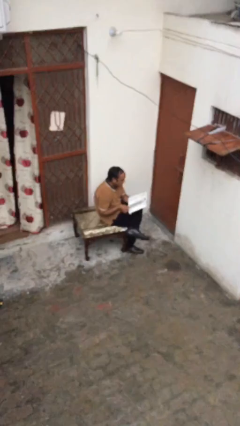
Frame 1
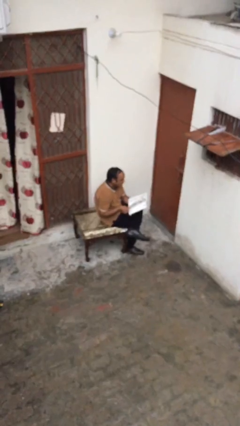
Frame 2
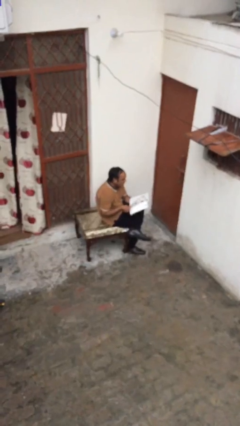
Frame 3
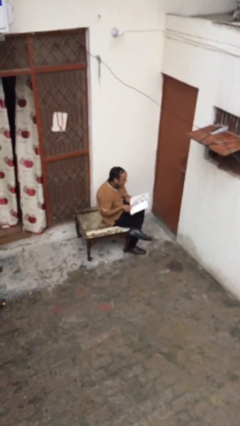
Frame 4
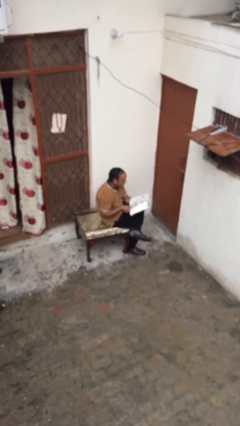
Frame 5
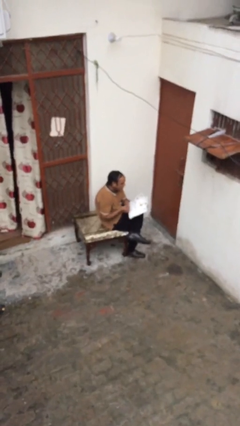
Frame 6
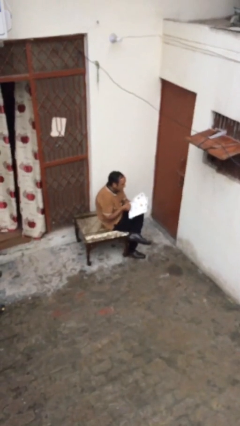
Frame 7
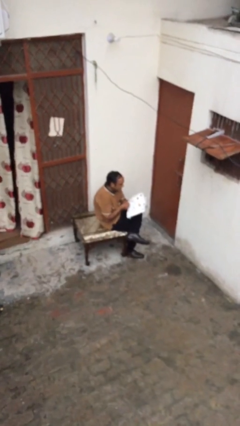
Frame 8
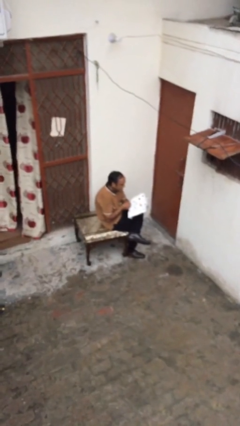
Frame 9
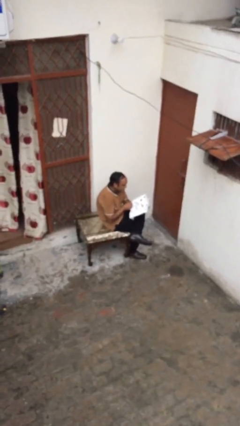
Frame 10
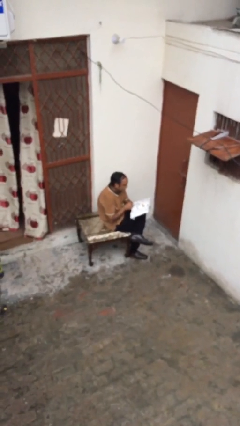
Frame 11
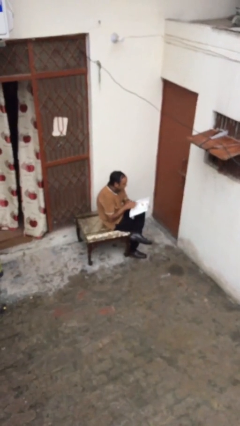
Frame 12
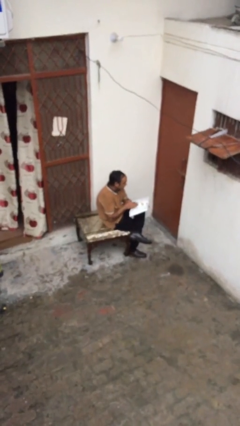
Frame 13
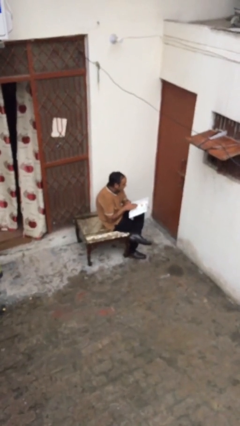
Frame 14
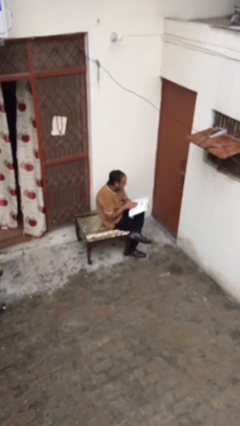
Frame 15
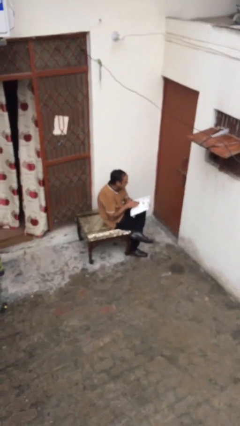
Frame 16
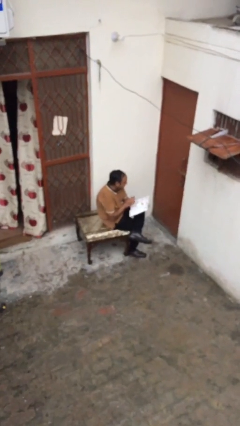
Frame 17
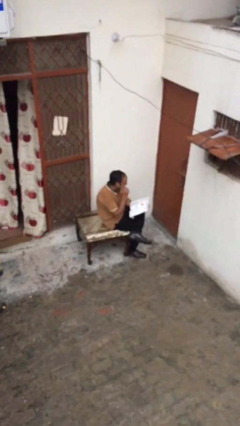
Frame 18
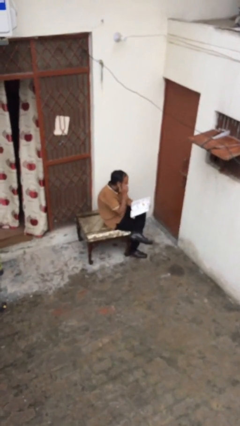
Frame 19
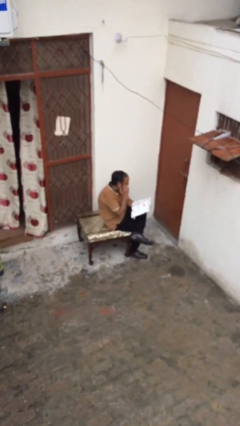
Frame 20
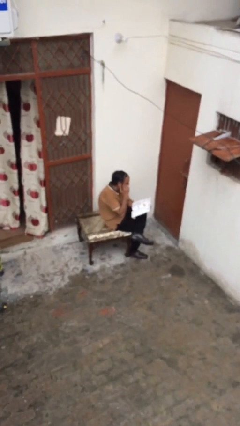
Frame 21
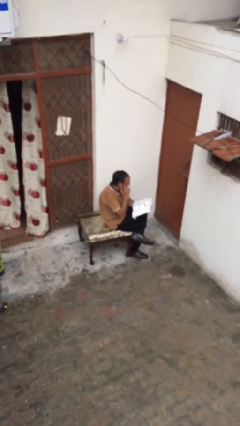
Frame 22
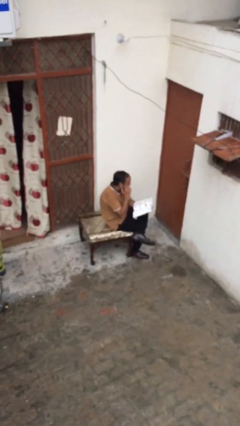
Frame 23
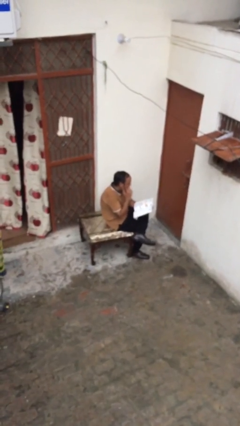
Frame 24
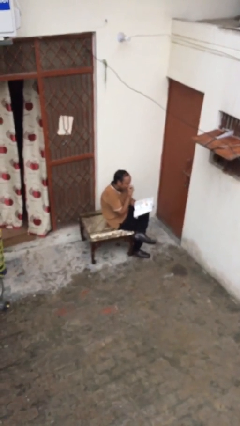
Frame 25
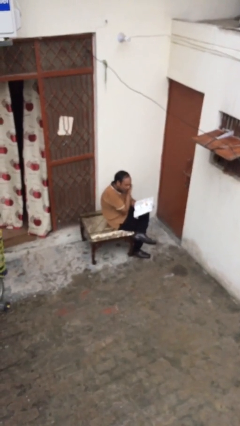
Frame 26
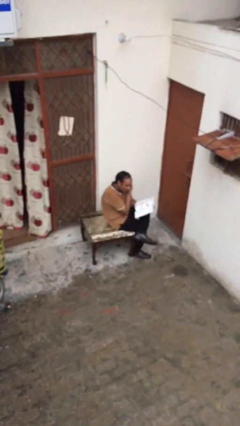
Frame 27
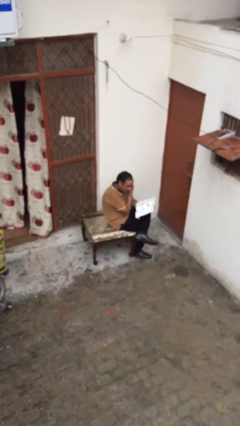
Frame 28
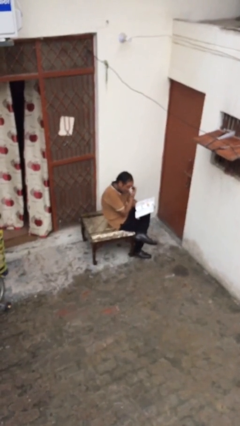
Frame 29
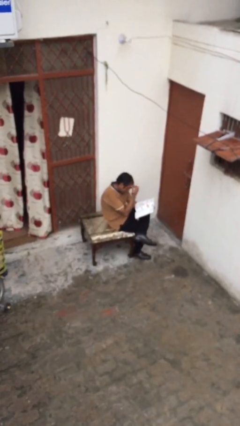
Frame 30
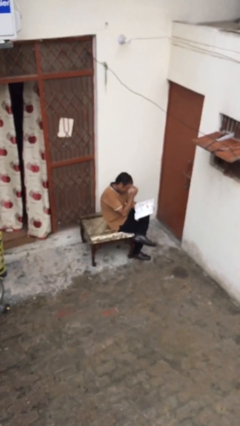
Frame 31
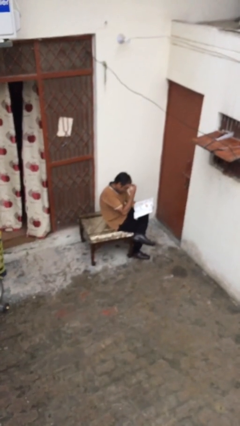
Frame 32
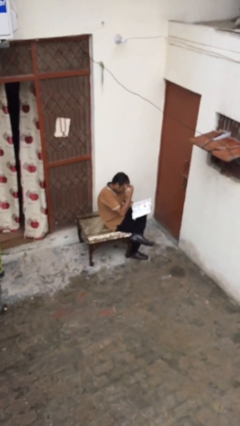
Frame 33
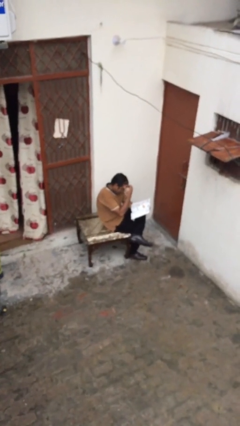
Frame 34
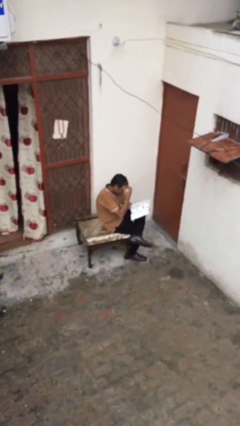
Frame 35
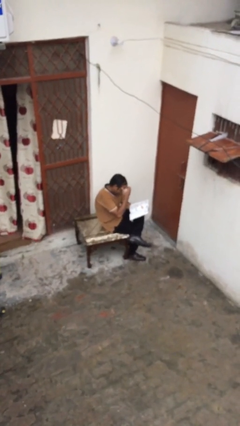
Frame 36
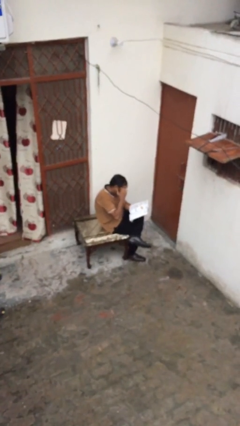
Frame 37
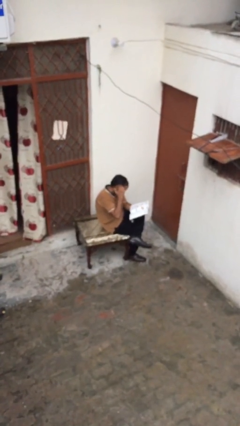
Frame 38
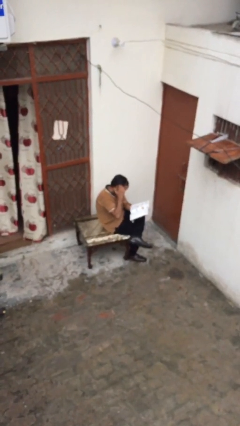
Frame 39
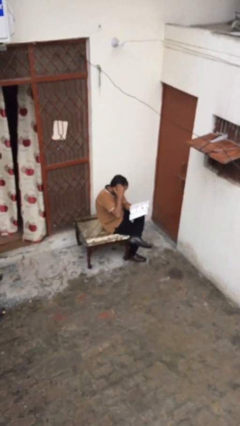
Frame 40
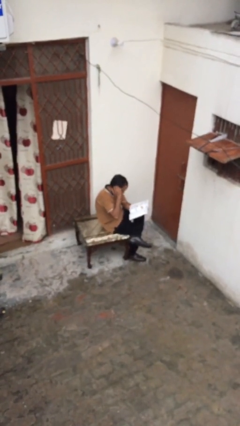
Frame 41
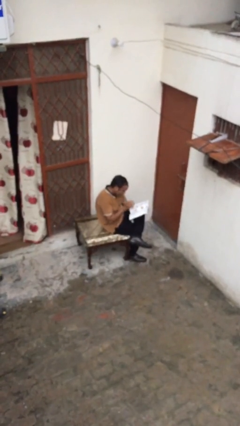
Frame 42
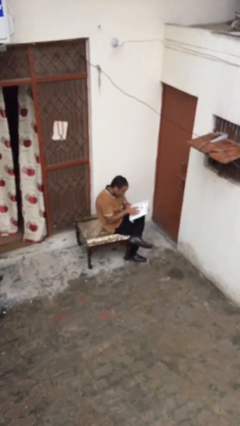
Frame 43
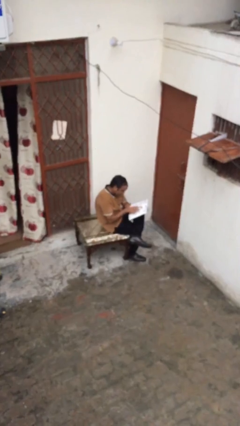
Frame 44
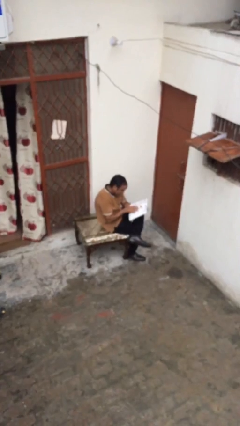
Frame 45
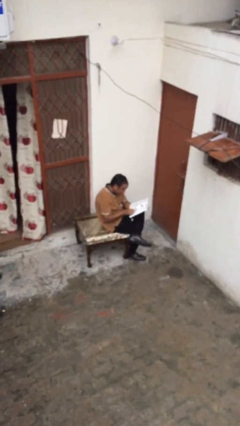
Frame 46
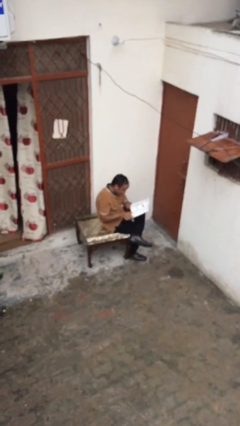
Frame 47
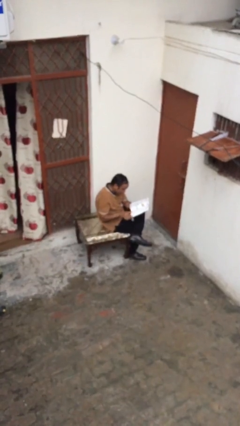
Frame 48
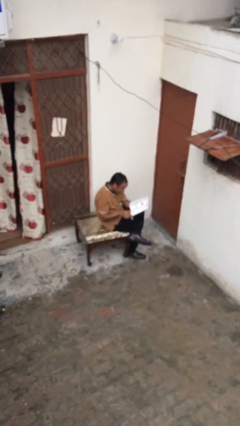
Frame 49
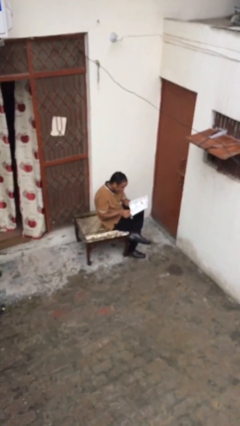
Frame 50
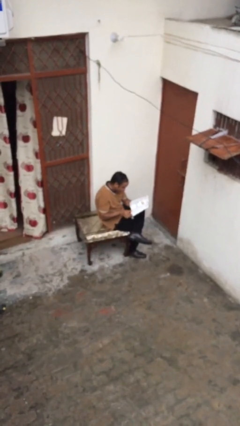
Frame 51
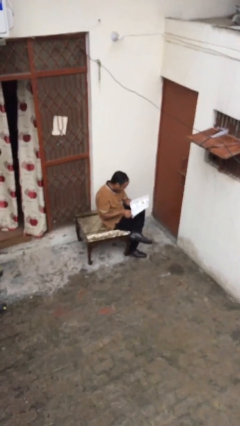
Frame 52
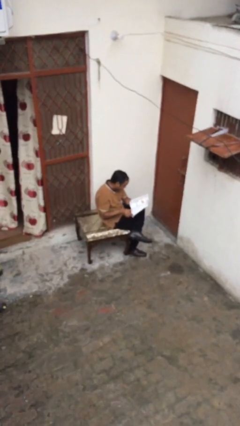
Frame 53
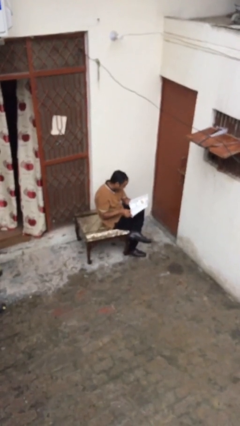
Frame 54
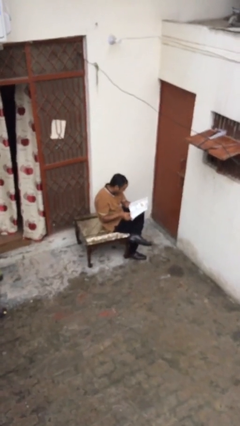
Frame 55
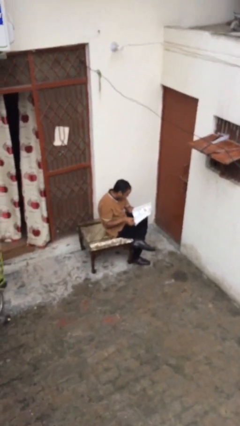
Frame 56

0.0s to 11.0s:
person reads document

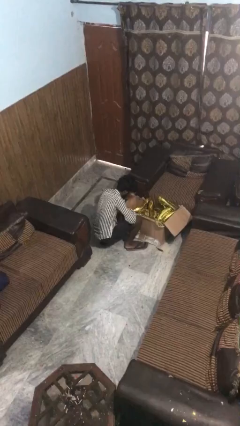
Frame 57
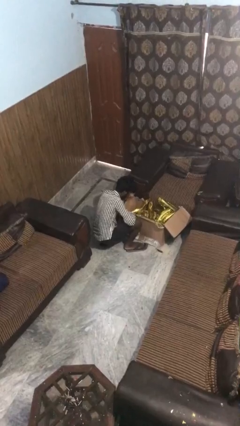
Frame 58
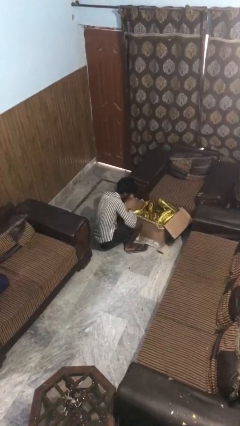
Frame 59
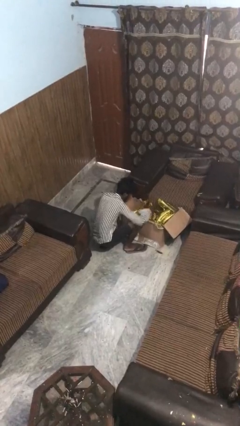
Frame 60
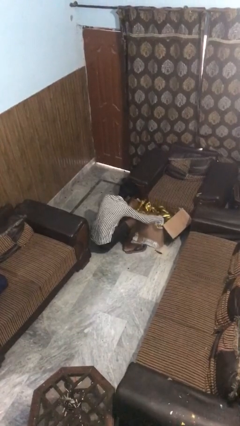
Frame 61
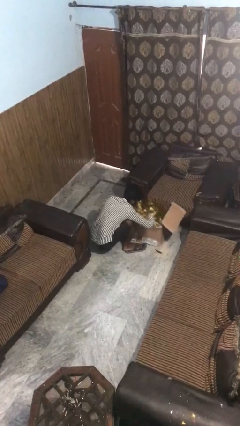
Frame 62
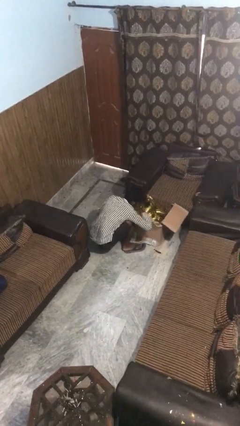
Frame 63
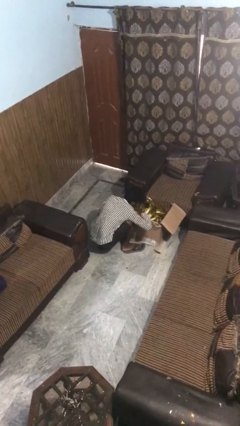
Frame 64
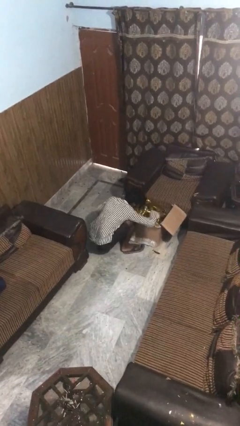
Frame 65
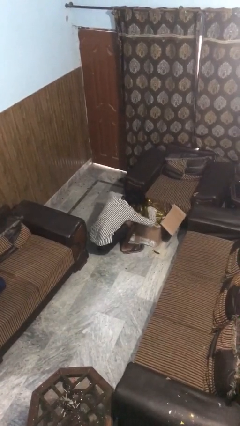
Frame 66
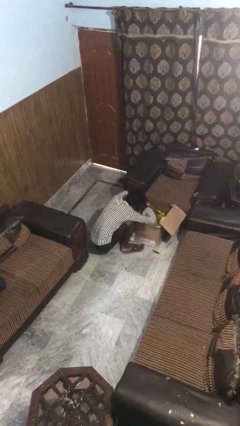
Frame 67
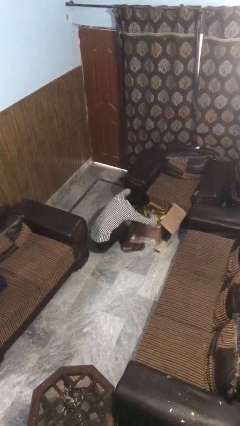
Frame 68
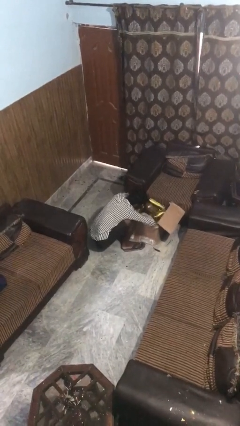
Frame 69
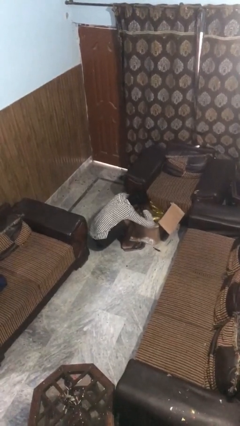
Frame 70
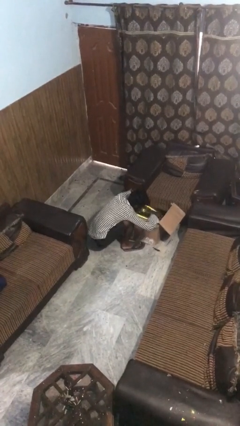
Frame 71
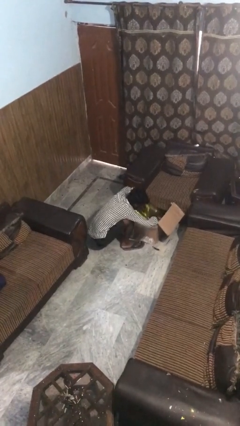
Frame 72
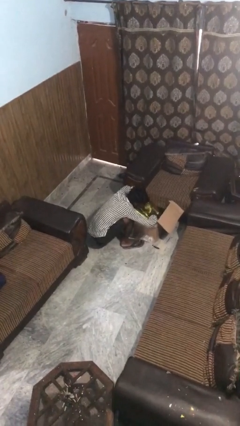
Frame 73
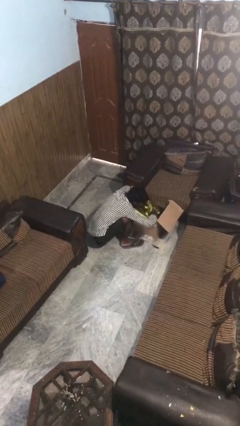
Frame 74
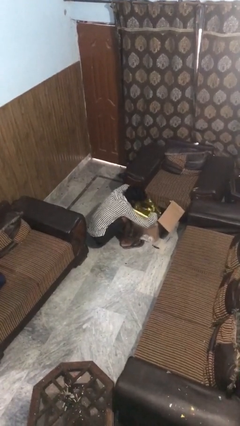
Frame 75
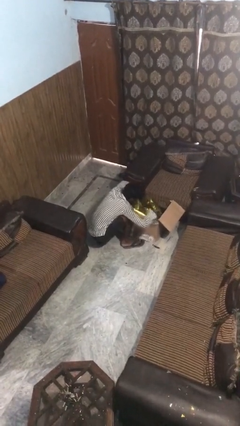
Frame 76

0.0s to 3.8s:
person searches in box

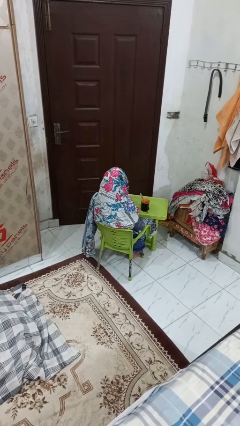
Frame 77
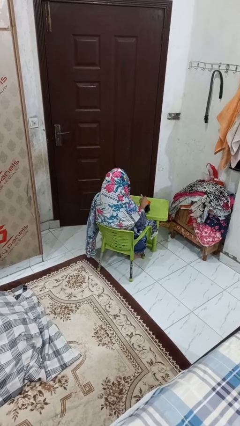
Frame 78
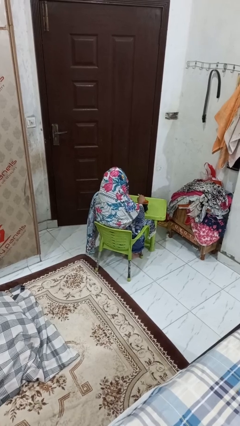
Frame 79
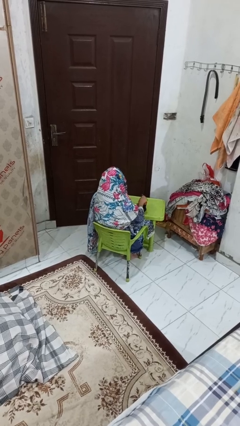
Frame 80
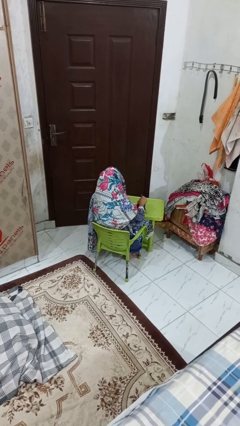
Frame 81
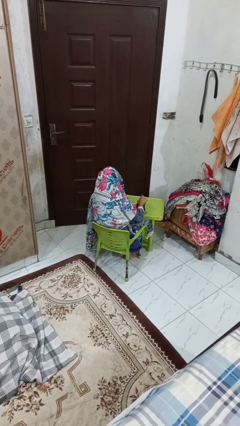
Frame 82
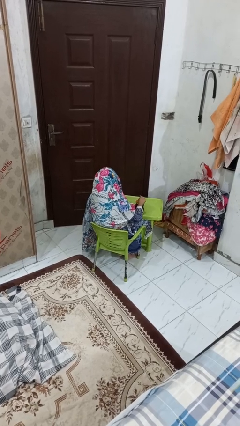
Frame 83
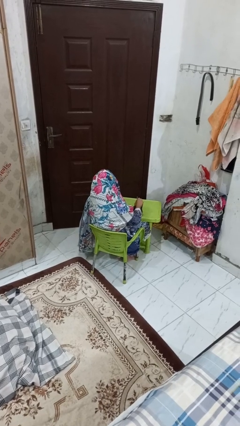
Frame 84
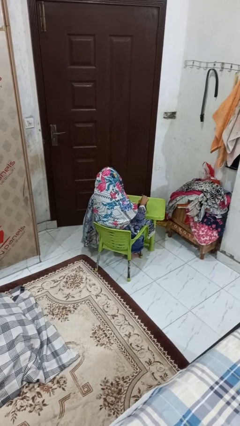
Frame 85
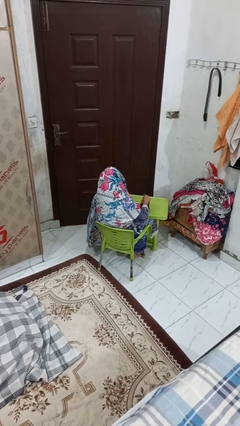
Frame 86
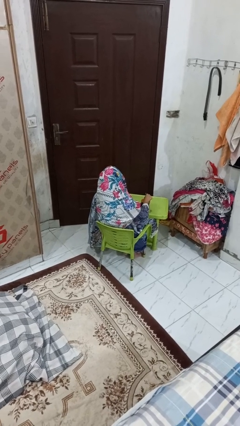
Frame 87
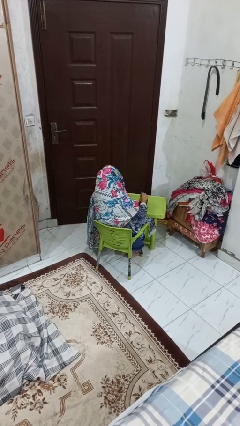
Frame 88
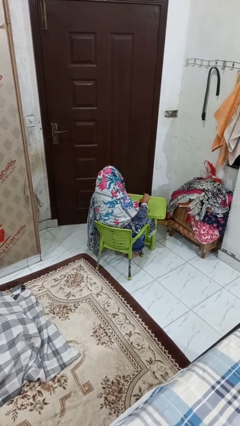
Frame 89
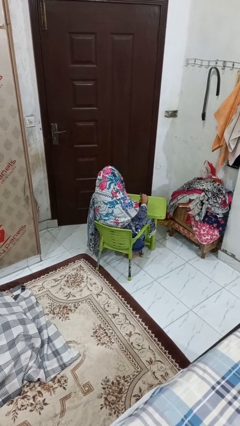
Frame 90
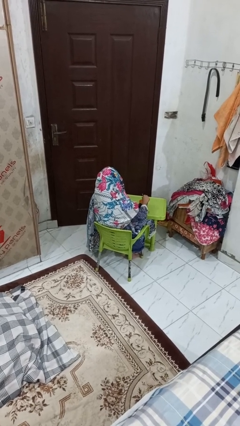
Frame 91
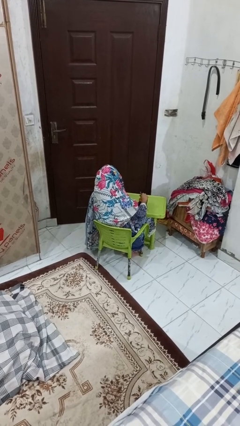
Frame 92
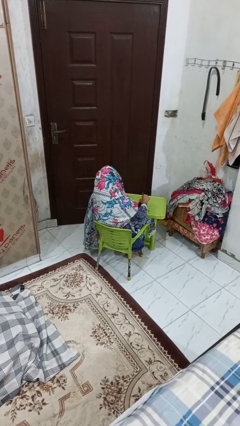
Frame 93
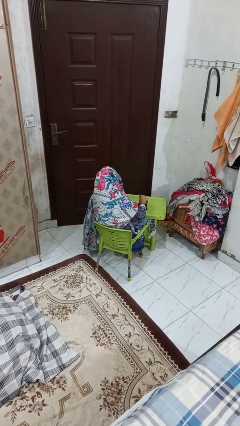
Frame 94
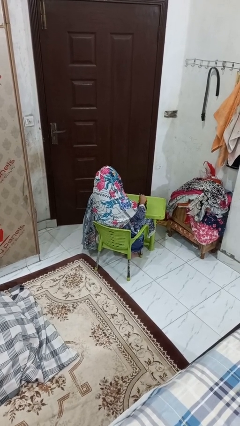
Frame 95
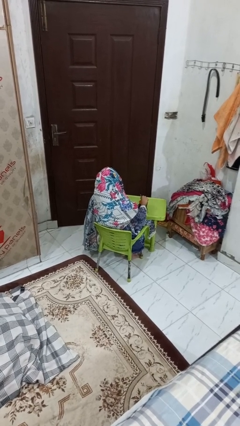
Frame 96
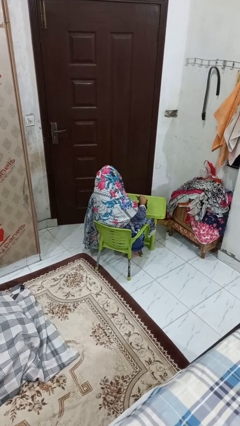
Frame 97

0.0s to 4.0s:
person stirs mug
